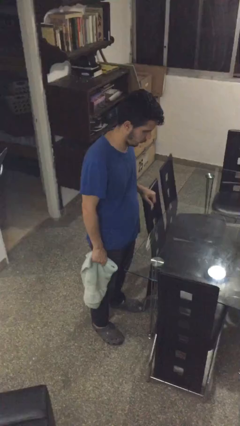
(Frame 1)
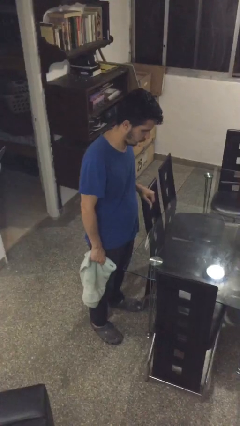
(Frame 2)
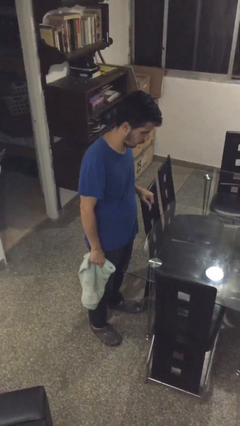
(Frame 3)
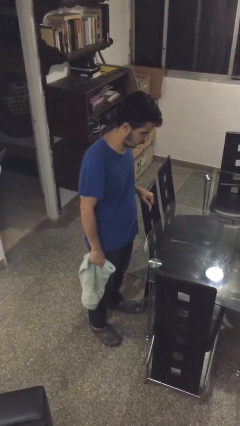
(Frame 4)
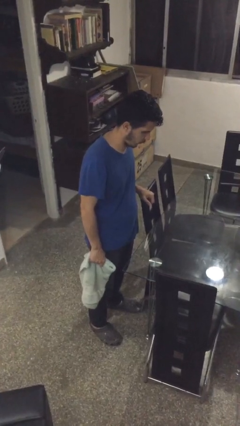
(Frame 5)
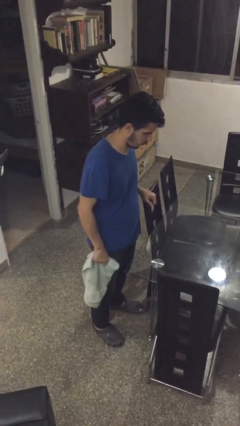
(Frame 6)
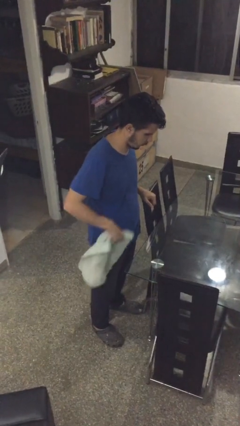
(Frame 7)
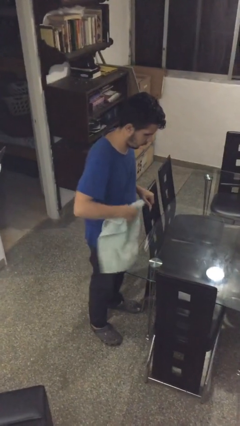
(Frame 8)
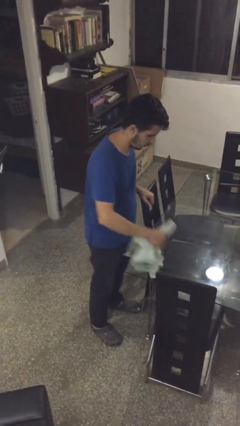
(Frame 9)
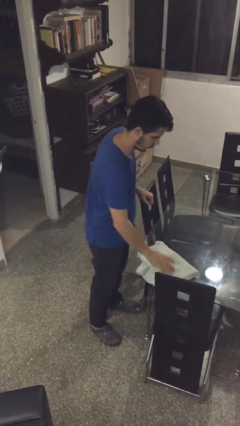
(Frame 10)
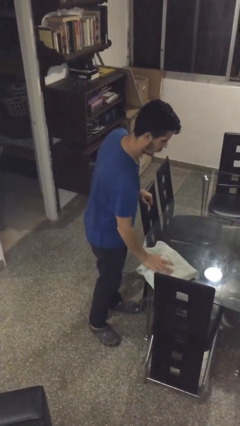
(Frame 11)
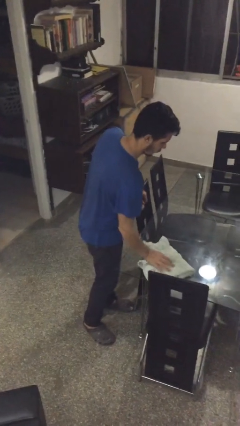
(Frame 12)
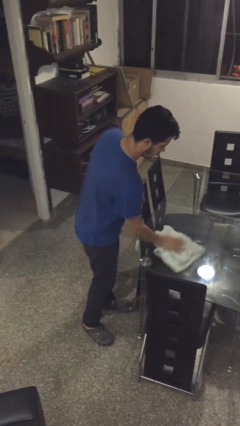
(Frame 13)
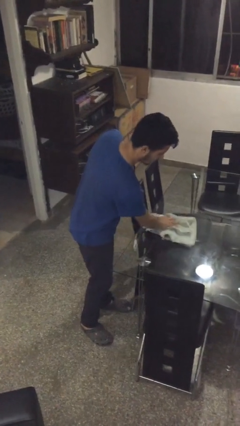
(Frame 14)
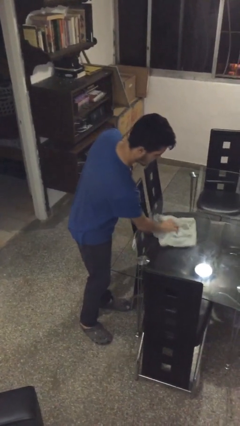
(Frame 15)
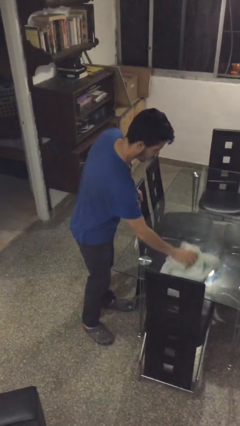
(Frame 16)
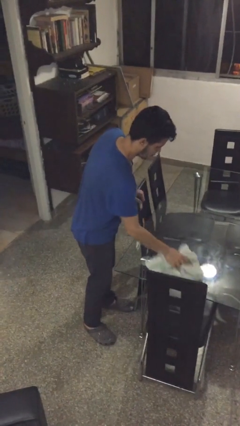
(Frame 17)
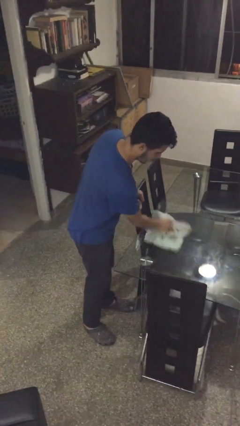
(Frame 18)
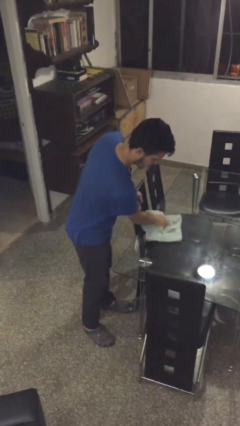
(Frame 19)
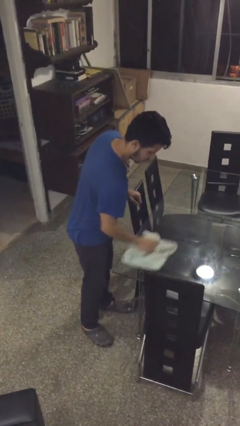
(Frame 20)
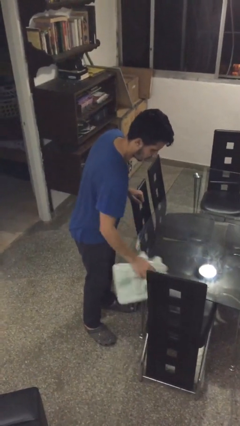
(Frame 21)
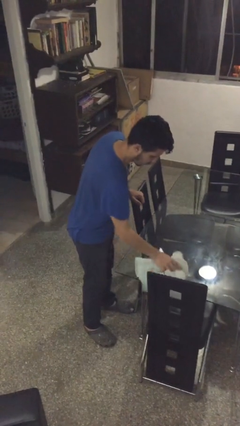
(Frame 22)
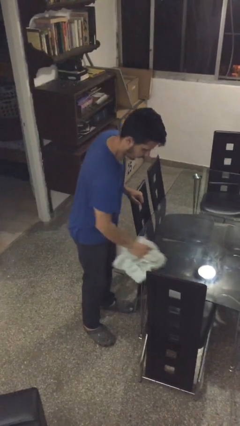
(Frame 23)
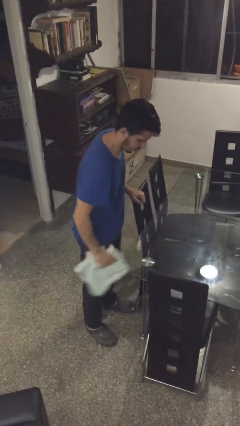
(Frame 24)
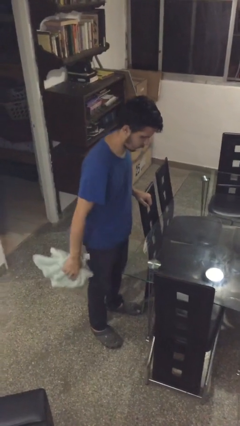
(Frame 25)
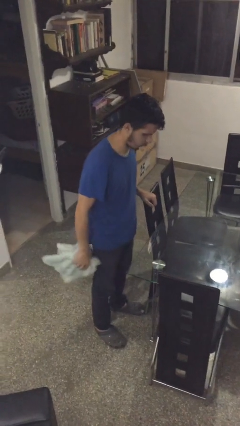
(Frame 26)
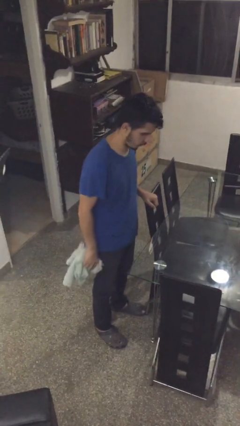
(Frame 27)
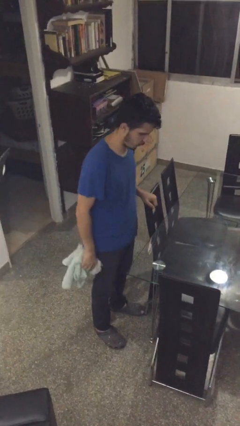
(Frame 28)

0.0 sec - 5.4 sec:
person cleans table with rag

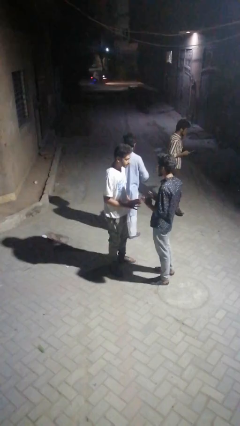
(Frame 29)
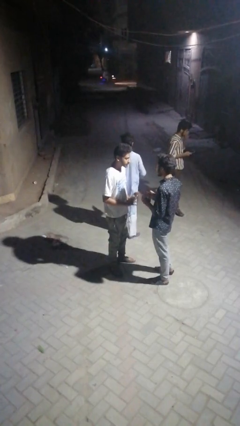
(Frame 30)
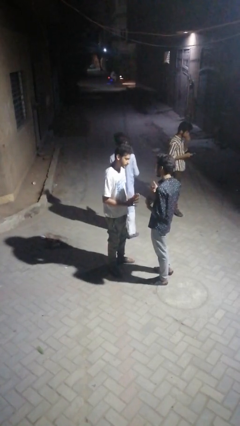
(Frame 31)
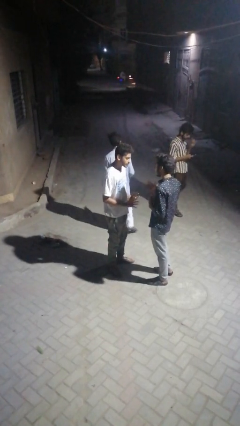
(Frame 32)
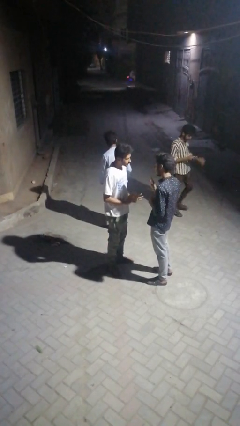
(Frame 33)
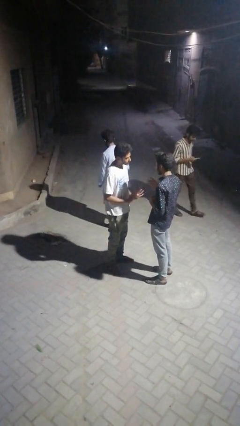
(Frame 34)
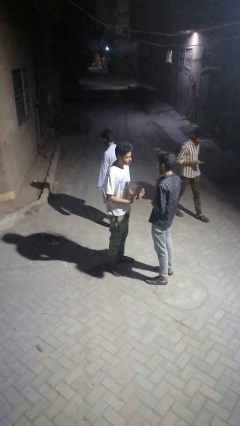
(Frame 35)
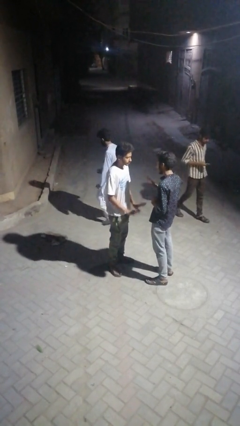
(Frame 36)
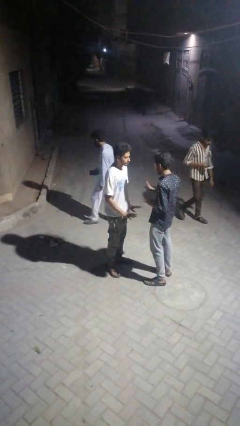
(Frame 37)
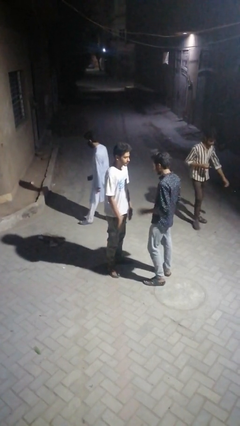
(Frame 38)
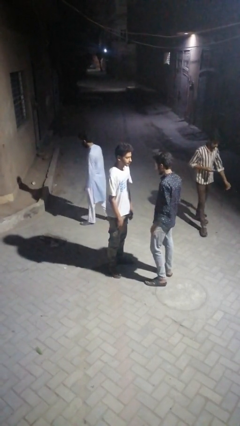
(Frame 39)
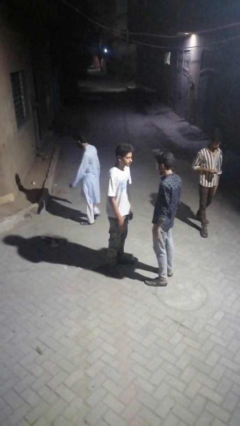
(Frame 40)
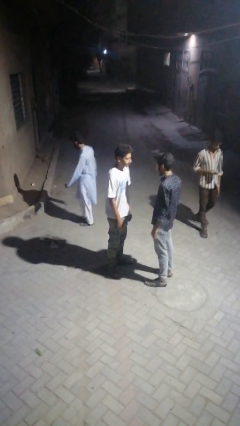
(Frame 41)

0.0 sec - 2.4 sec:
person talks to person

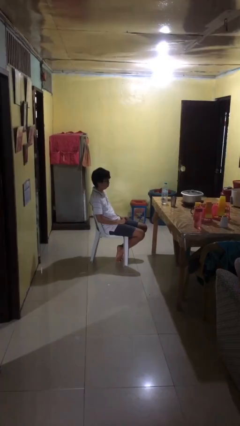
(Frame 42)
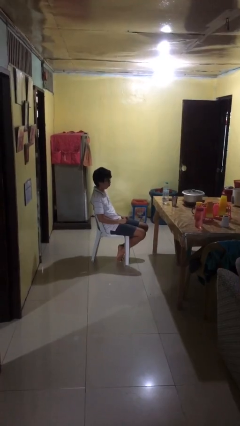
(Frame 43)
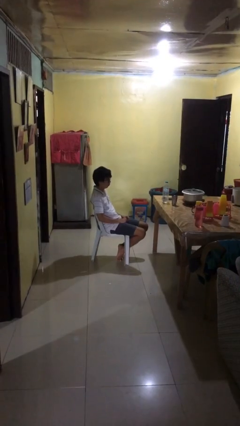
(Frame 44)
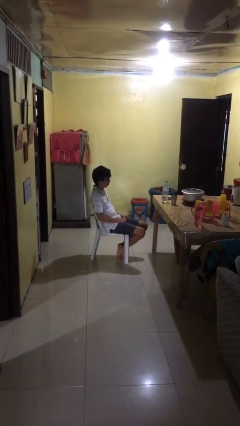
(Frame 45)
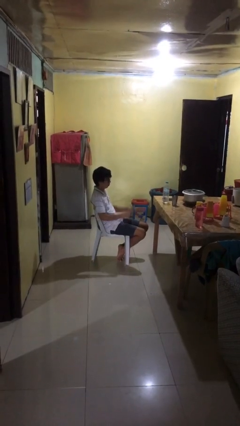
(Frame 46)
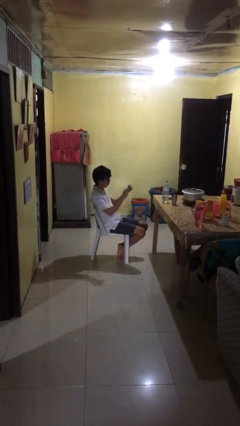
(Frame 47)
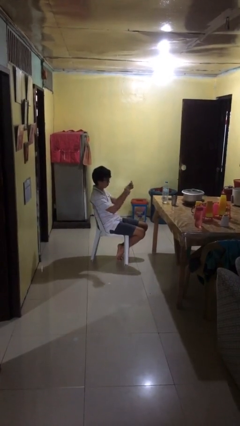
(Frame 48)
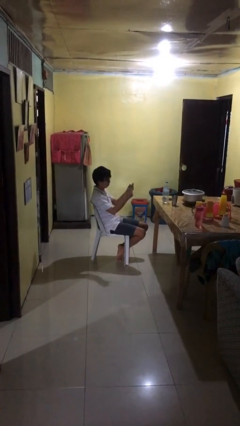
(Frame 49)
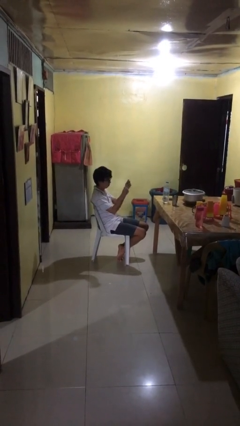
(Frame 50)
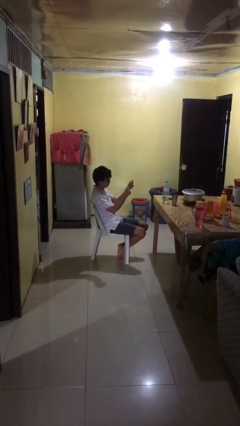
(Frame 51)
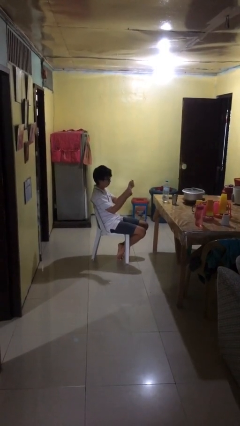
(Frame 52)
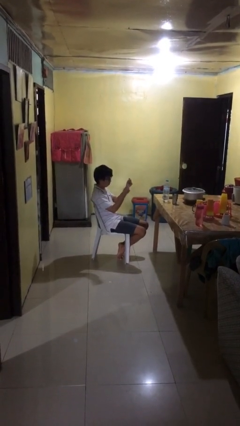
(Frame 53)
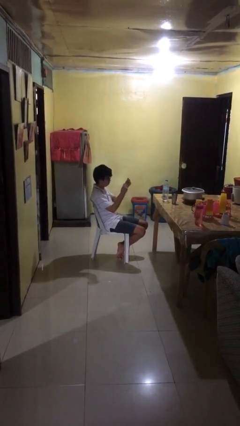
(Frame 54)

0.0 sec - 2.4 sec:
person snaps fingers

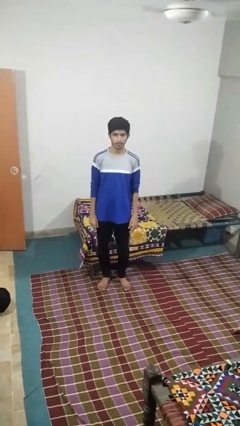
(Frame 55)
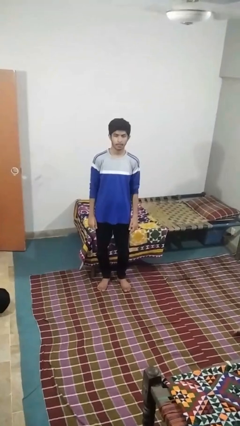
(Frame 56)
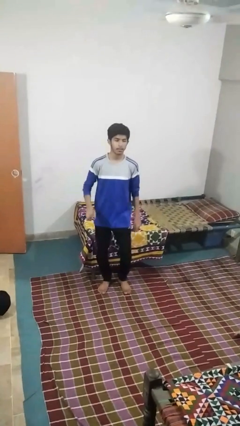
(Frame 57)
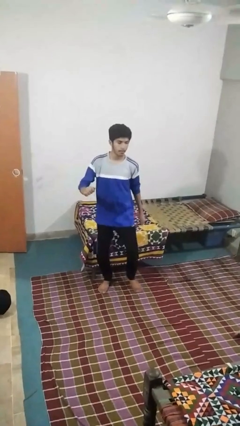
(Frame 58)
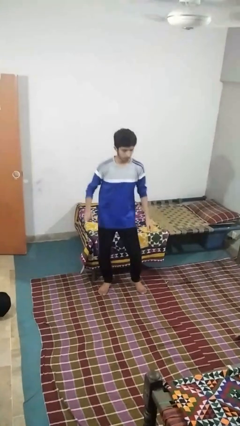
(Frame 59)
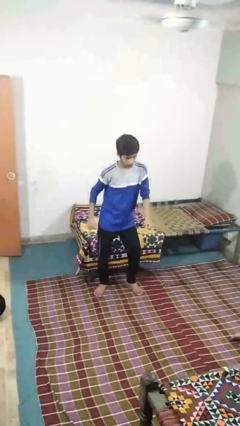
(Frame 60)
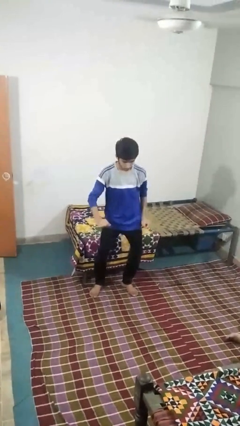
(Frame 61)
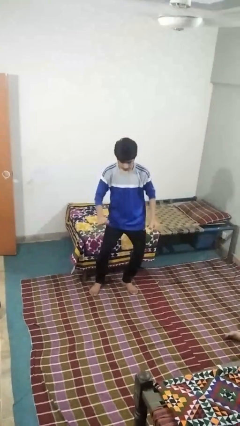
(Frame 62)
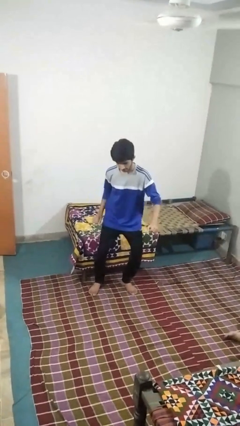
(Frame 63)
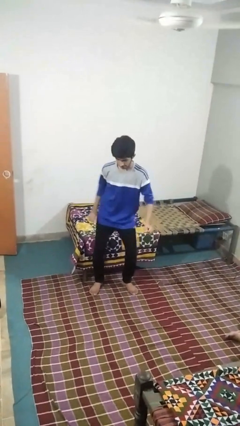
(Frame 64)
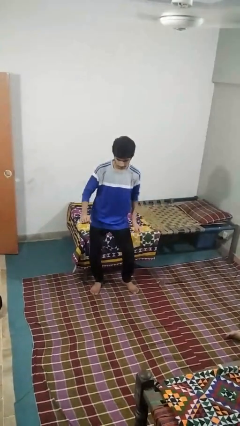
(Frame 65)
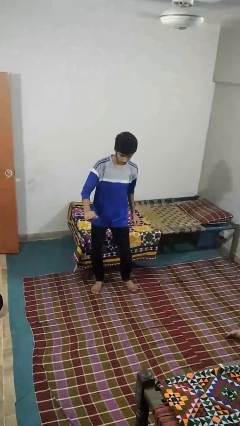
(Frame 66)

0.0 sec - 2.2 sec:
person dances in place

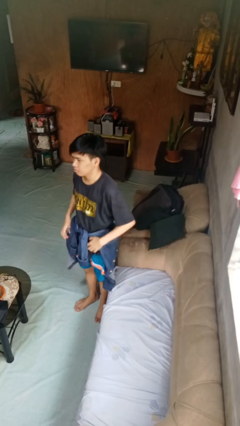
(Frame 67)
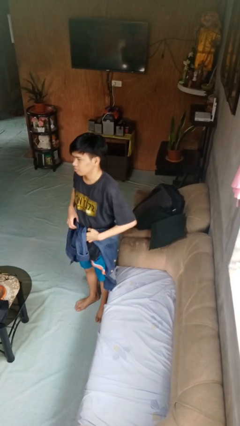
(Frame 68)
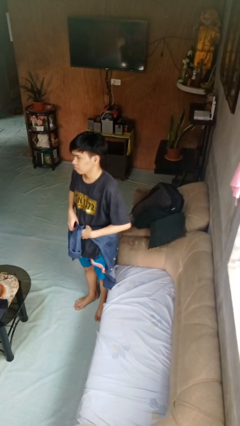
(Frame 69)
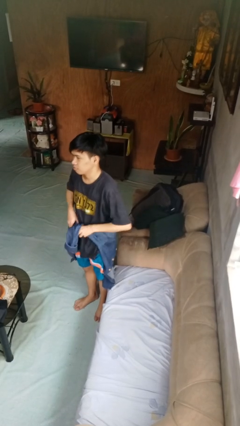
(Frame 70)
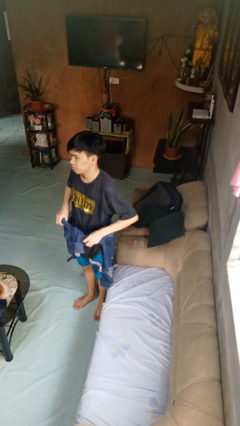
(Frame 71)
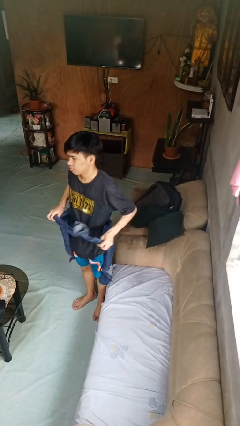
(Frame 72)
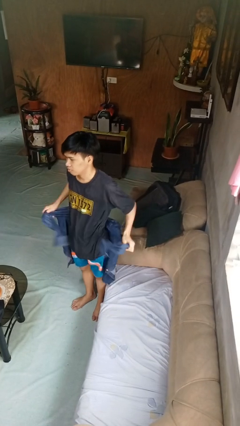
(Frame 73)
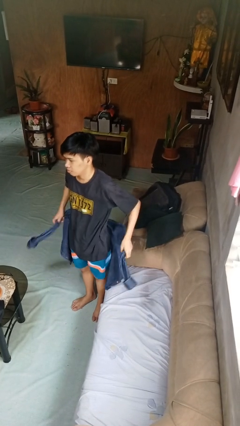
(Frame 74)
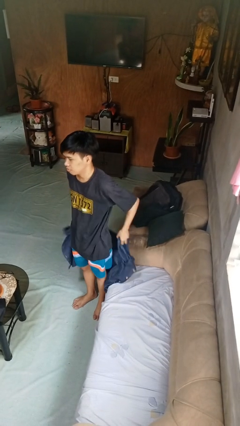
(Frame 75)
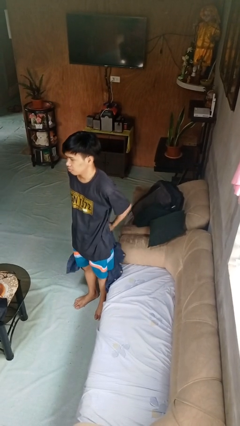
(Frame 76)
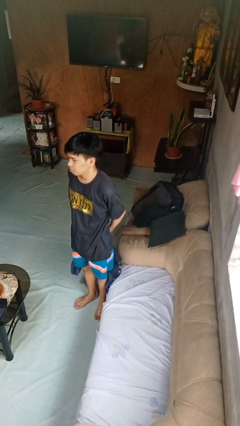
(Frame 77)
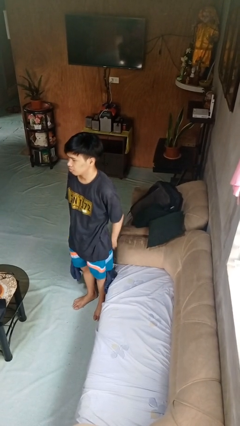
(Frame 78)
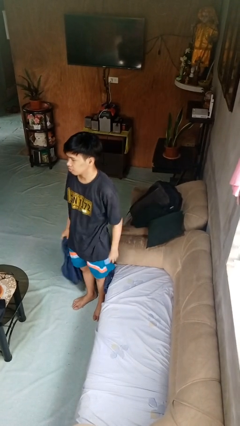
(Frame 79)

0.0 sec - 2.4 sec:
person unties jacket around waist

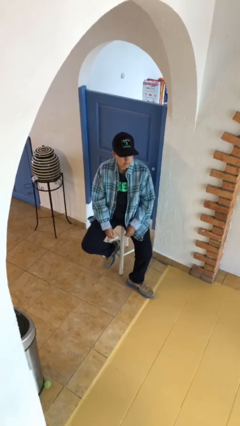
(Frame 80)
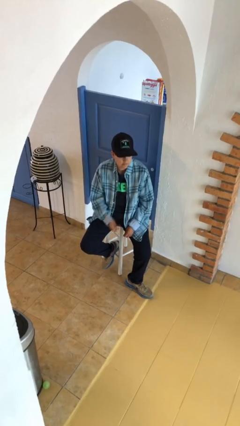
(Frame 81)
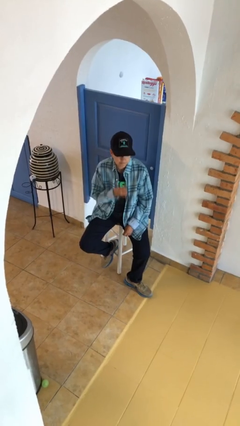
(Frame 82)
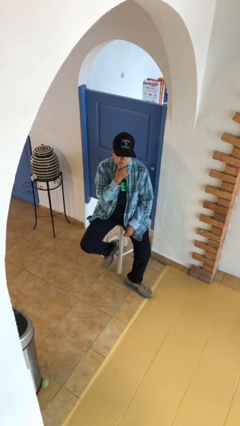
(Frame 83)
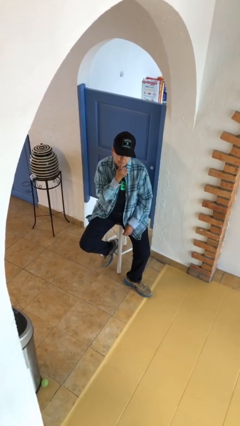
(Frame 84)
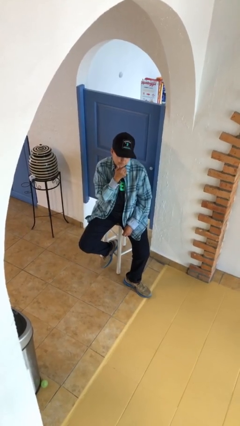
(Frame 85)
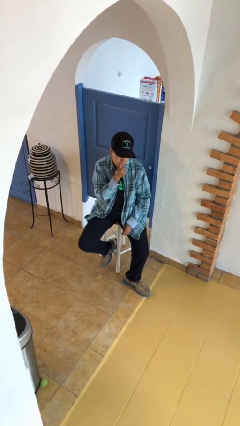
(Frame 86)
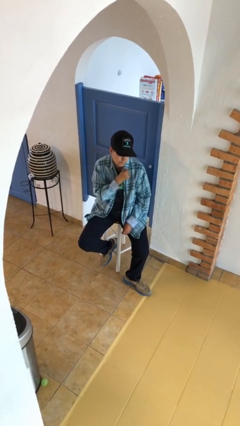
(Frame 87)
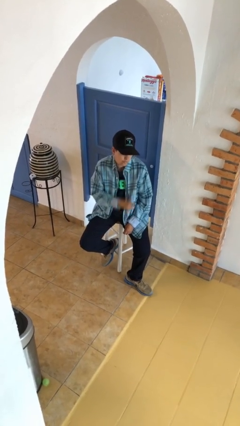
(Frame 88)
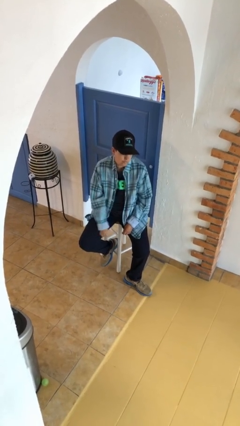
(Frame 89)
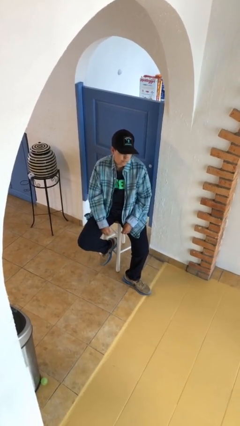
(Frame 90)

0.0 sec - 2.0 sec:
person strokes chin

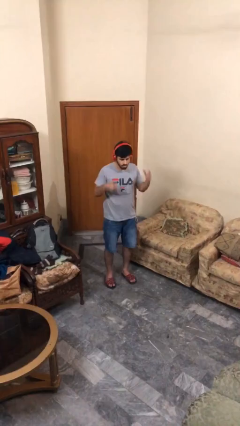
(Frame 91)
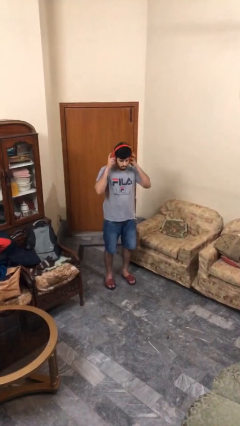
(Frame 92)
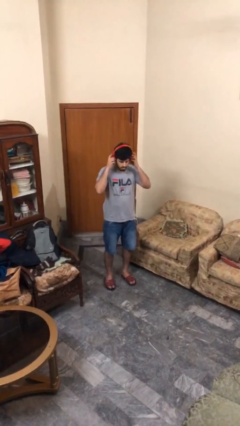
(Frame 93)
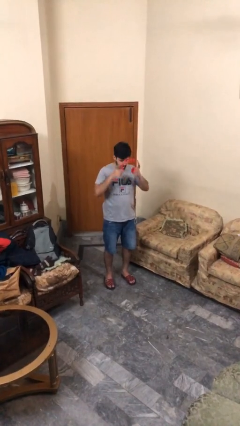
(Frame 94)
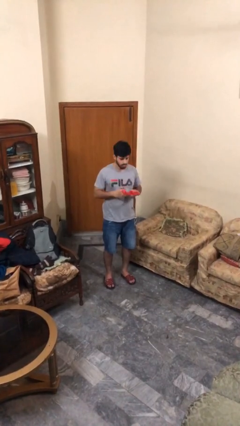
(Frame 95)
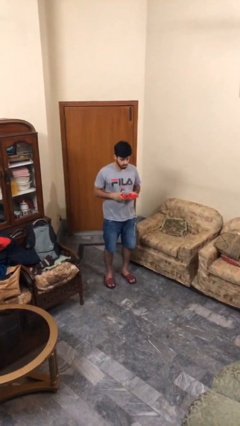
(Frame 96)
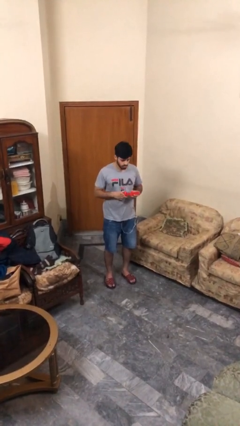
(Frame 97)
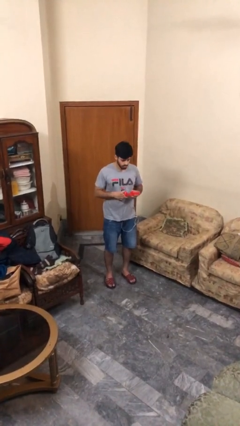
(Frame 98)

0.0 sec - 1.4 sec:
person takes off headphones
